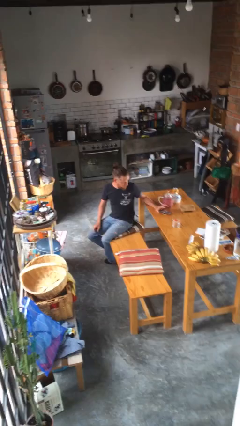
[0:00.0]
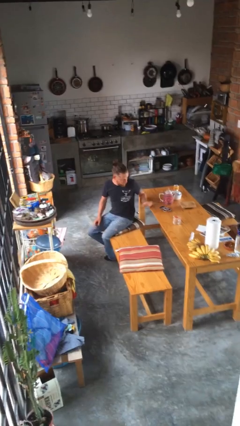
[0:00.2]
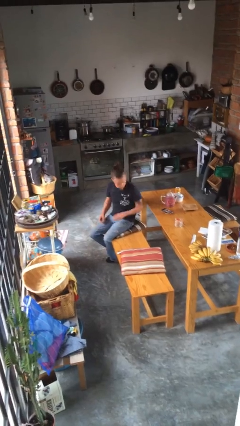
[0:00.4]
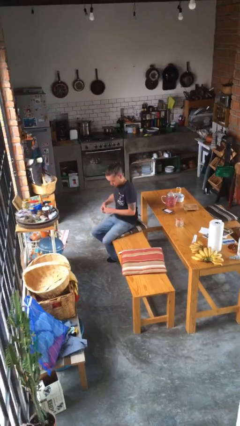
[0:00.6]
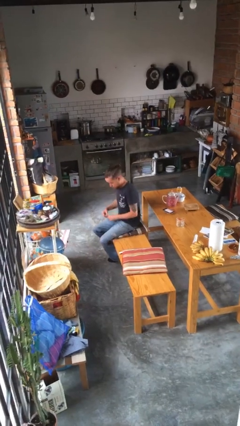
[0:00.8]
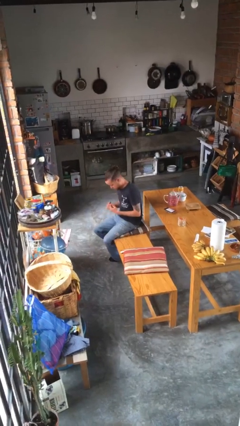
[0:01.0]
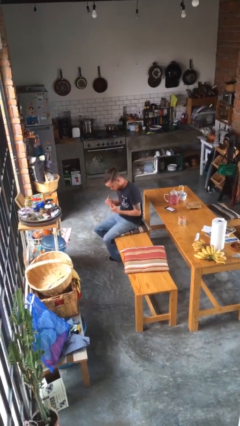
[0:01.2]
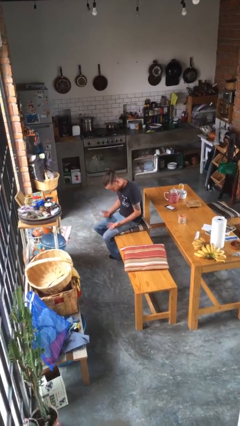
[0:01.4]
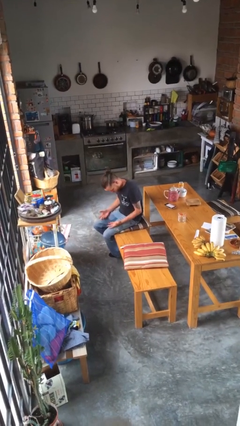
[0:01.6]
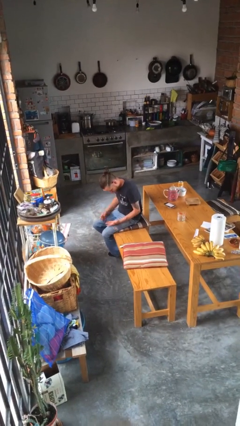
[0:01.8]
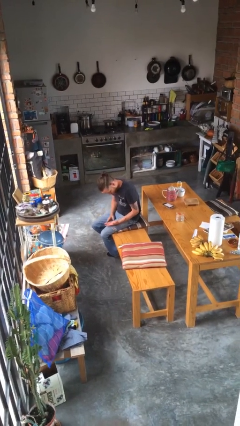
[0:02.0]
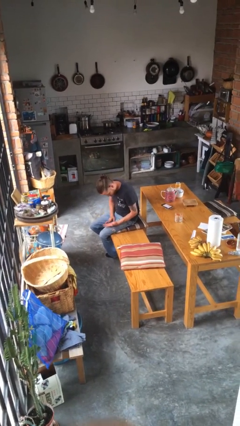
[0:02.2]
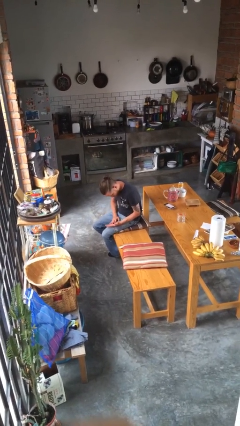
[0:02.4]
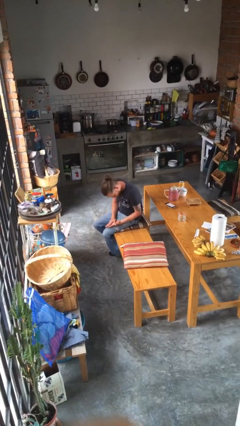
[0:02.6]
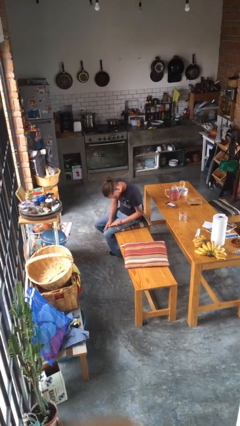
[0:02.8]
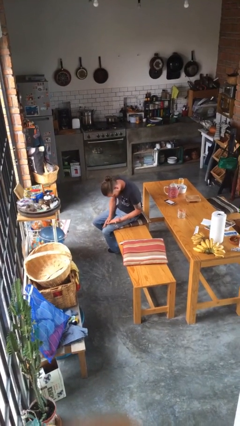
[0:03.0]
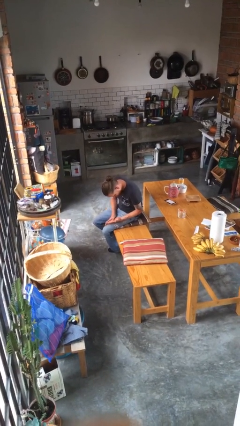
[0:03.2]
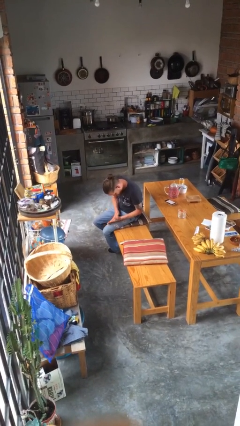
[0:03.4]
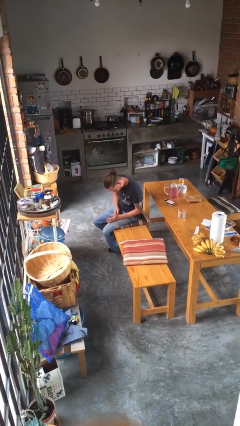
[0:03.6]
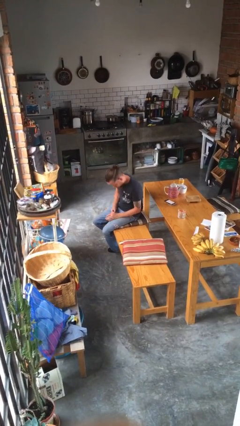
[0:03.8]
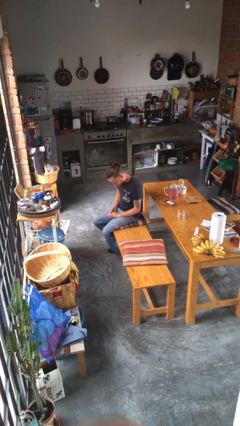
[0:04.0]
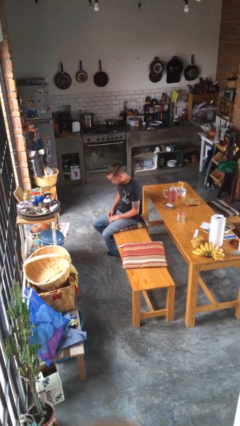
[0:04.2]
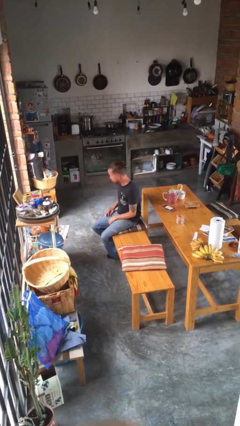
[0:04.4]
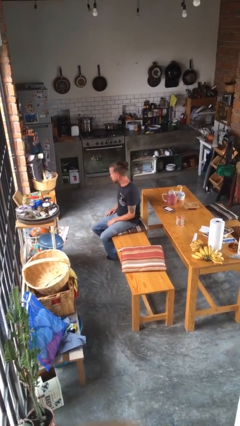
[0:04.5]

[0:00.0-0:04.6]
person looks at hands in lap

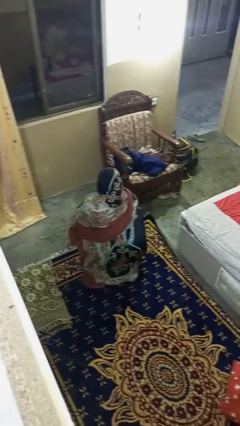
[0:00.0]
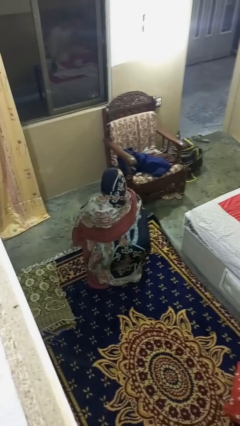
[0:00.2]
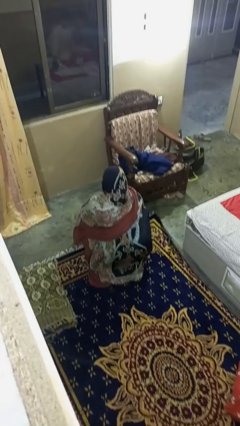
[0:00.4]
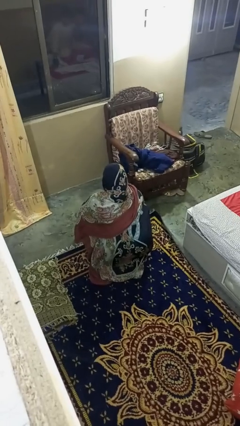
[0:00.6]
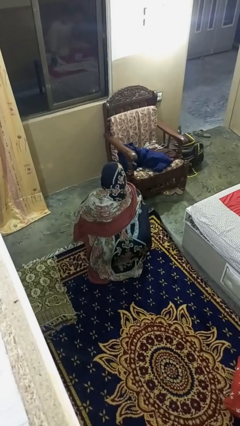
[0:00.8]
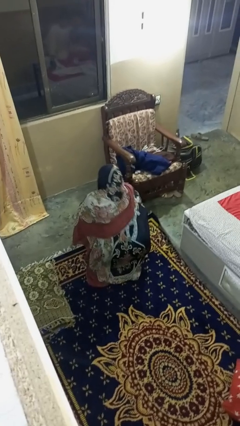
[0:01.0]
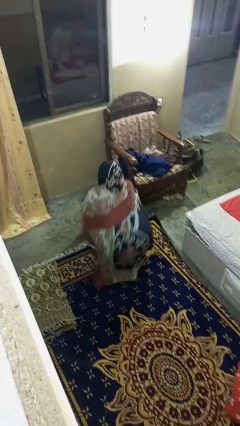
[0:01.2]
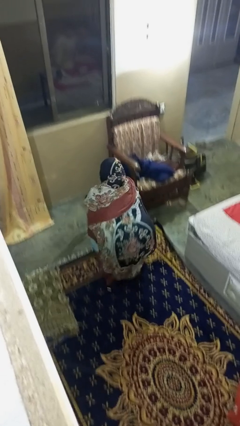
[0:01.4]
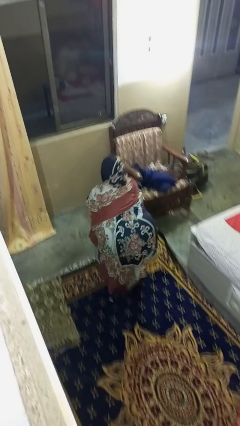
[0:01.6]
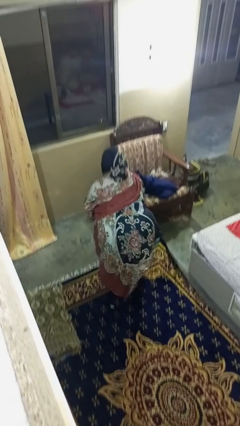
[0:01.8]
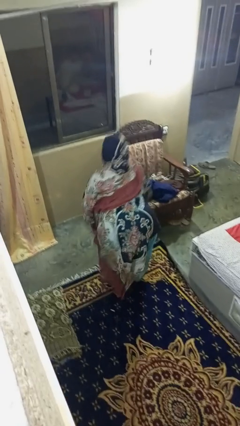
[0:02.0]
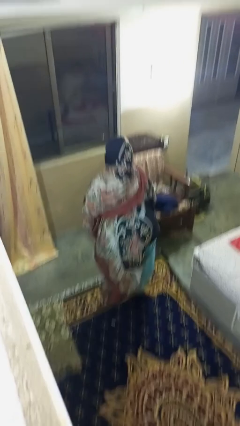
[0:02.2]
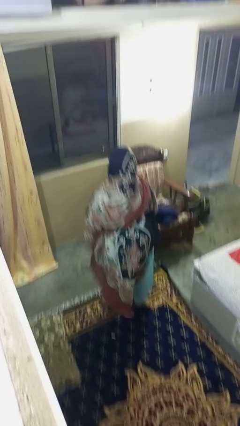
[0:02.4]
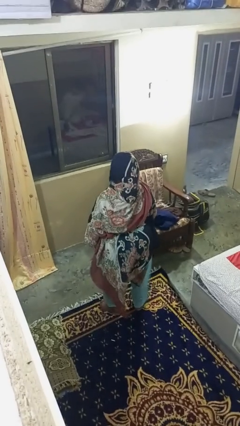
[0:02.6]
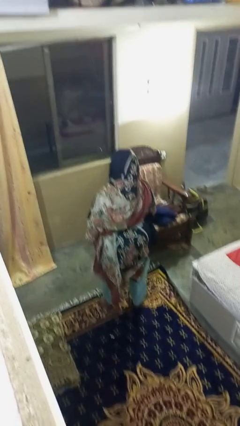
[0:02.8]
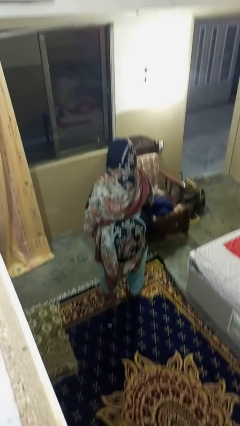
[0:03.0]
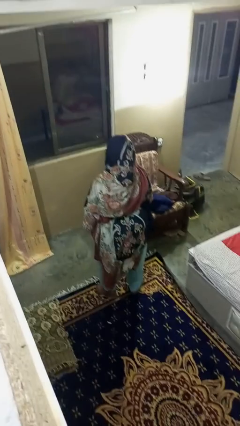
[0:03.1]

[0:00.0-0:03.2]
person stands up

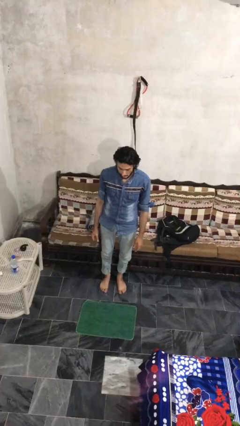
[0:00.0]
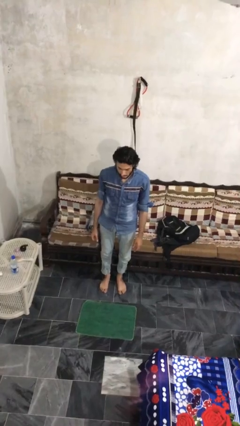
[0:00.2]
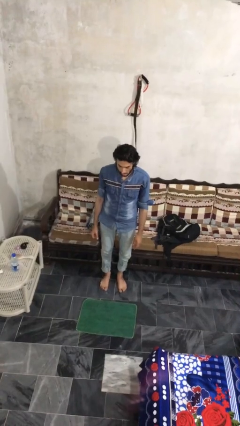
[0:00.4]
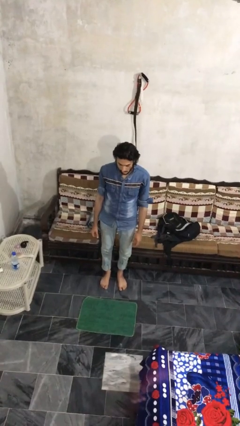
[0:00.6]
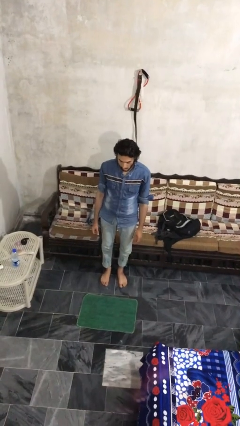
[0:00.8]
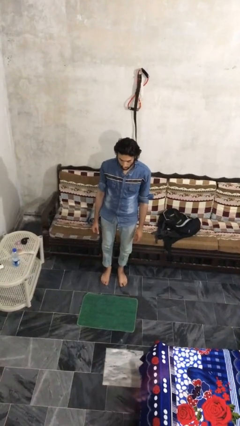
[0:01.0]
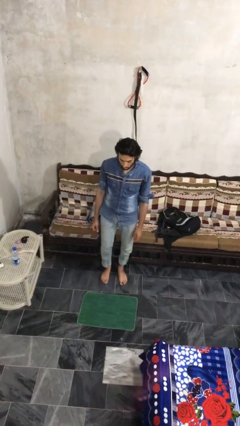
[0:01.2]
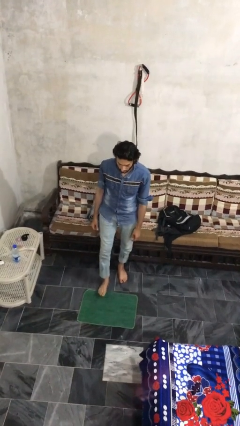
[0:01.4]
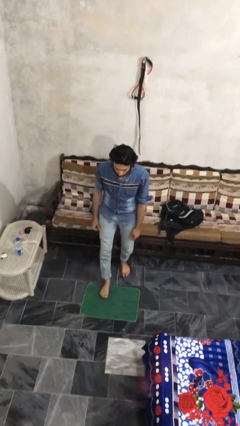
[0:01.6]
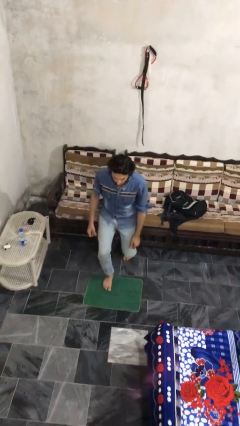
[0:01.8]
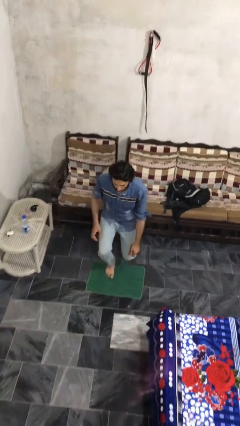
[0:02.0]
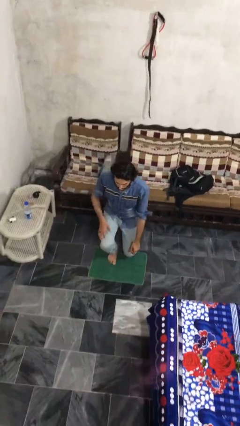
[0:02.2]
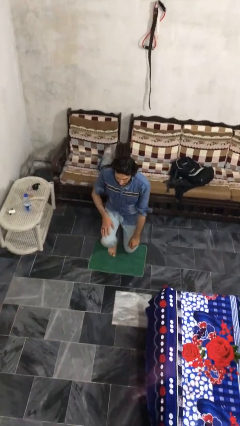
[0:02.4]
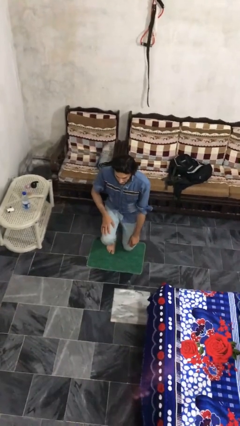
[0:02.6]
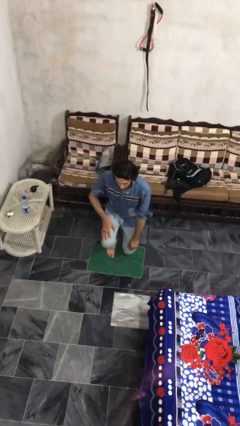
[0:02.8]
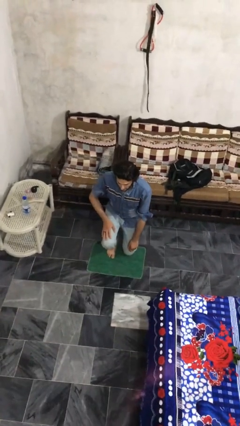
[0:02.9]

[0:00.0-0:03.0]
person kneels

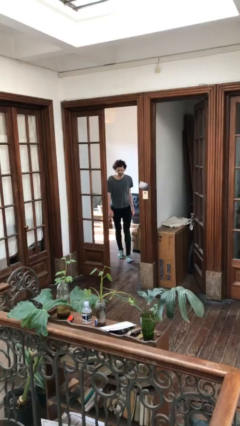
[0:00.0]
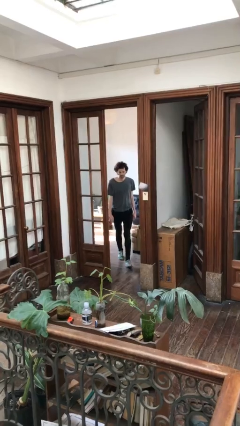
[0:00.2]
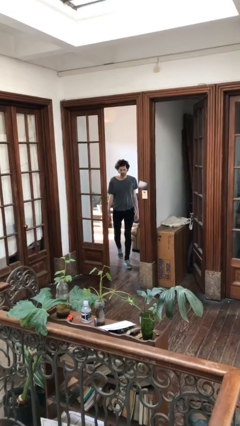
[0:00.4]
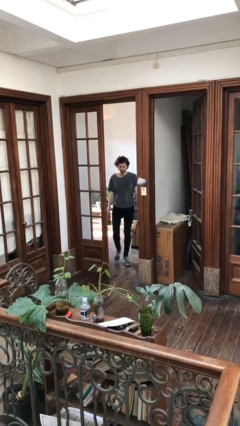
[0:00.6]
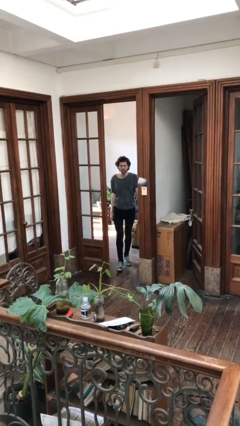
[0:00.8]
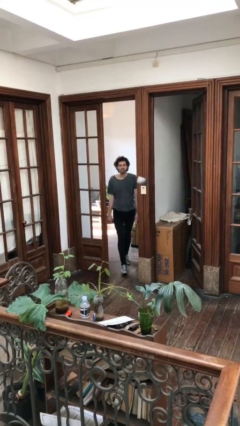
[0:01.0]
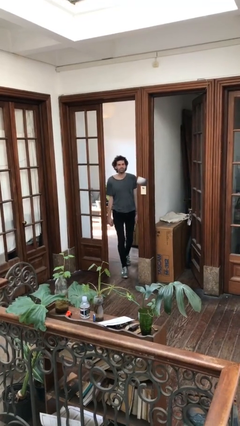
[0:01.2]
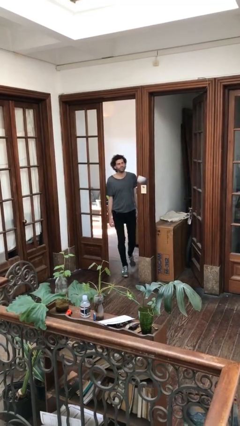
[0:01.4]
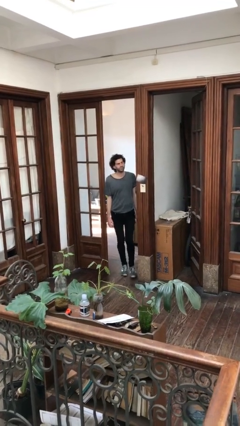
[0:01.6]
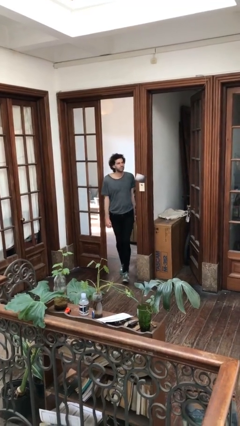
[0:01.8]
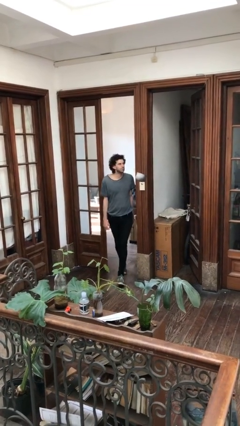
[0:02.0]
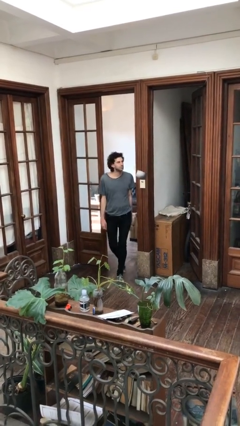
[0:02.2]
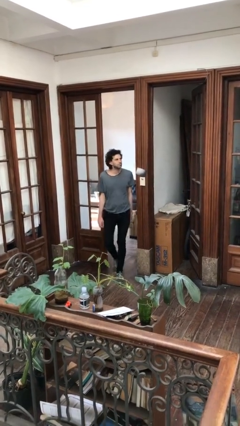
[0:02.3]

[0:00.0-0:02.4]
person enters scene through structure

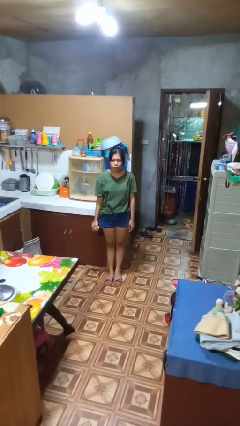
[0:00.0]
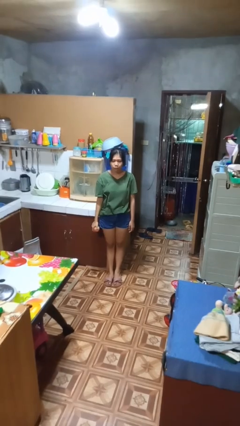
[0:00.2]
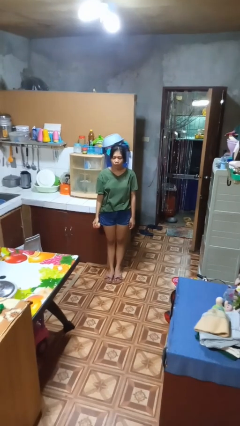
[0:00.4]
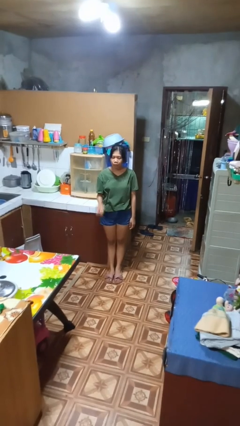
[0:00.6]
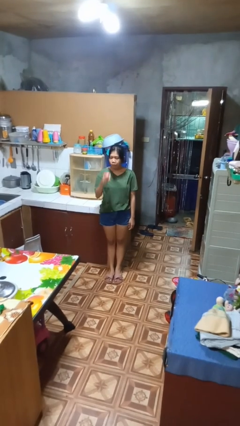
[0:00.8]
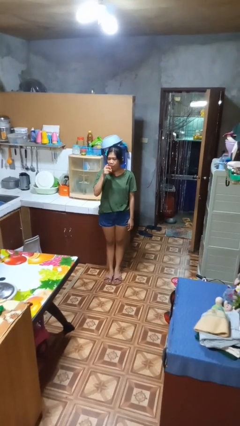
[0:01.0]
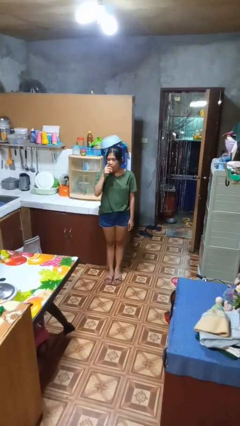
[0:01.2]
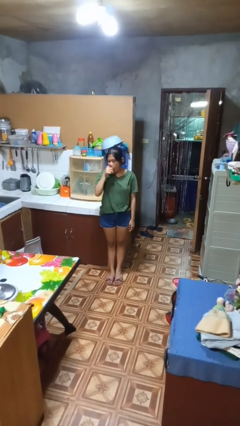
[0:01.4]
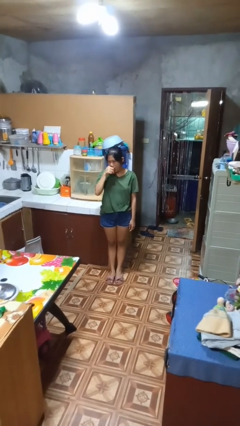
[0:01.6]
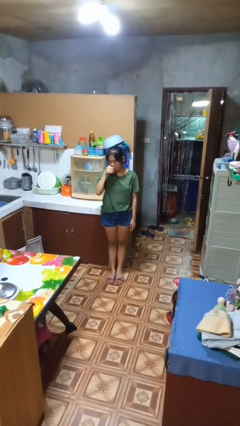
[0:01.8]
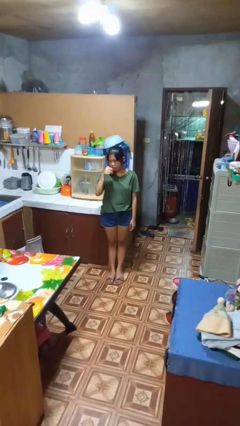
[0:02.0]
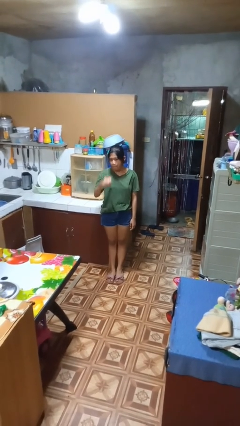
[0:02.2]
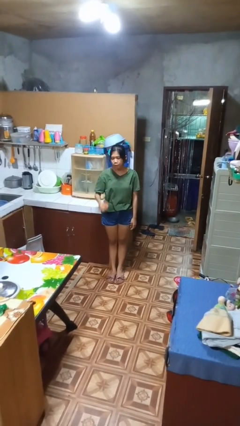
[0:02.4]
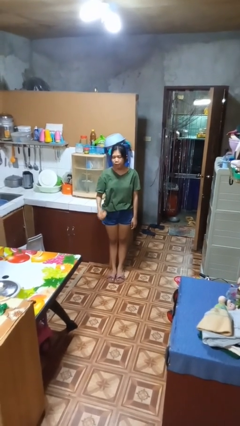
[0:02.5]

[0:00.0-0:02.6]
person eats apple

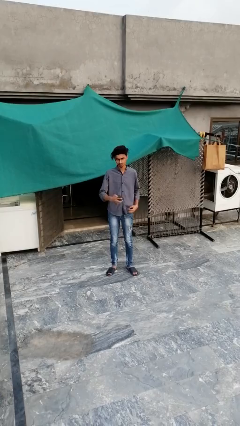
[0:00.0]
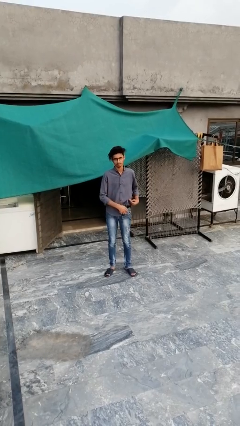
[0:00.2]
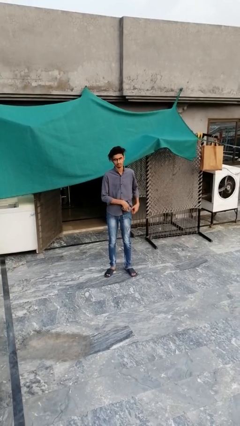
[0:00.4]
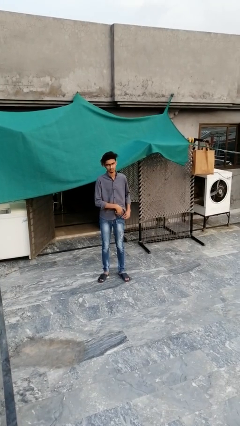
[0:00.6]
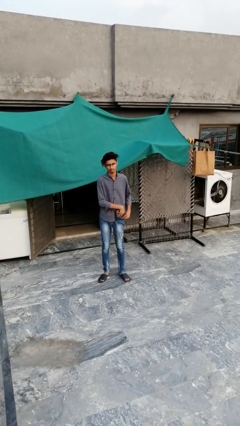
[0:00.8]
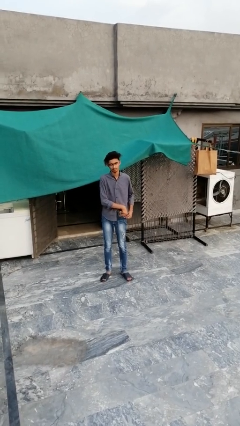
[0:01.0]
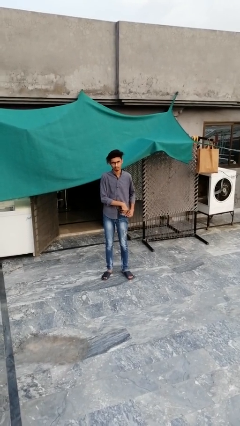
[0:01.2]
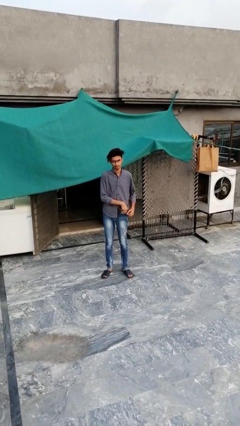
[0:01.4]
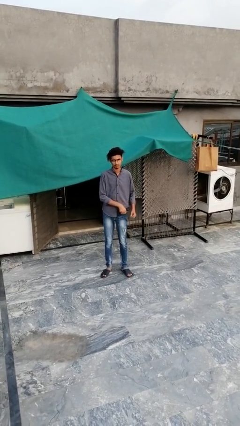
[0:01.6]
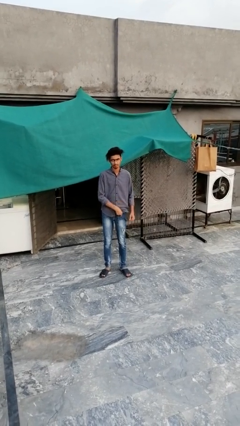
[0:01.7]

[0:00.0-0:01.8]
person puts phone into pocket
